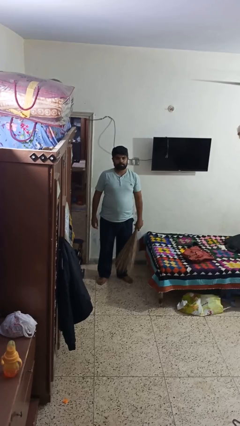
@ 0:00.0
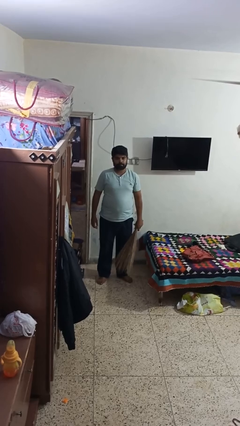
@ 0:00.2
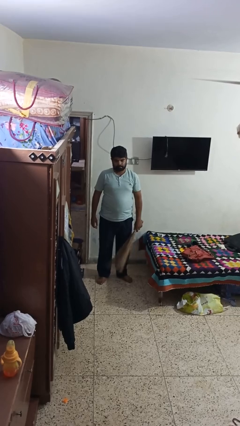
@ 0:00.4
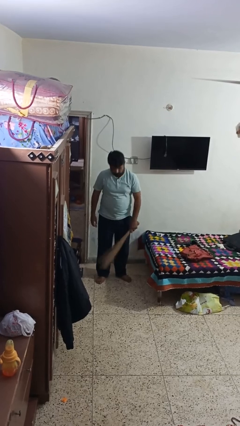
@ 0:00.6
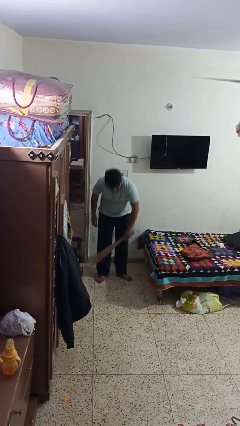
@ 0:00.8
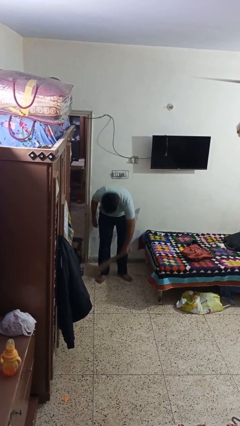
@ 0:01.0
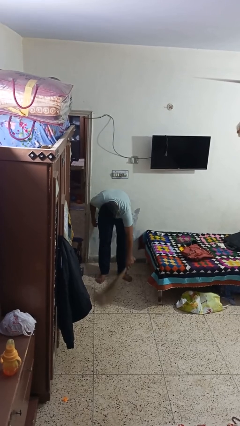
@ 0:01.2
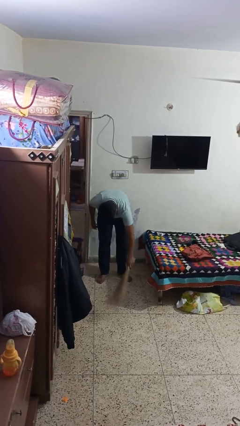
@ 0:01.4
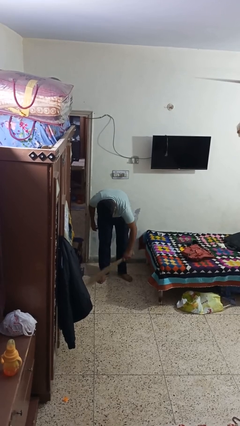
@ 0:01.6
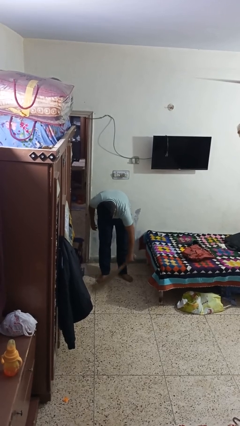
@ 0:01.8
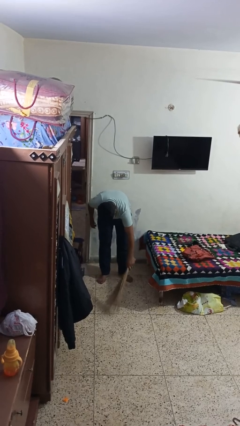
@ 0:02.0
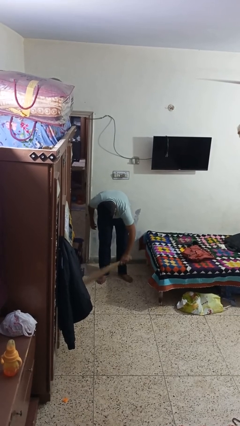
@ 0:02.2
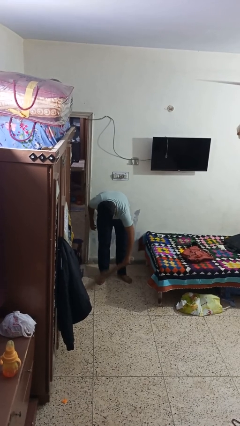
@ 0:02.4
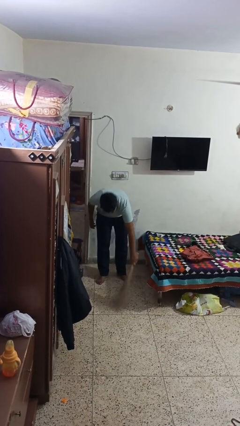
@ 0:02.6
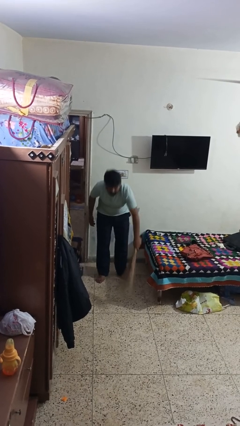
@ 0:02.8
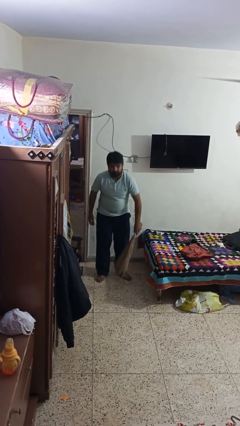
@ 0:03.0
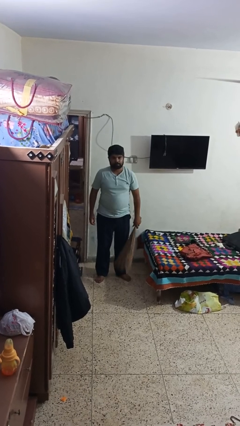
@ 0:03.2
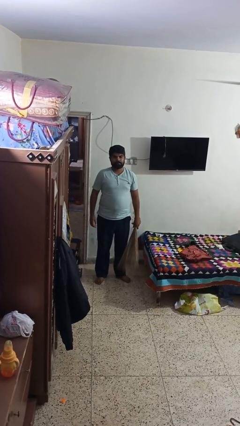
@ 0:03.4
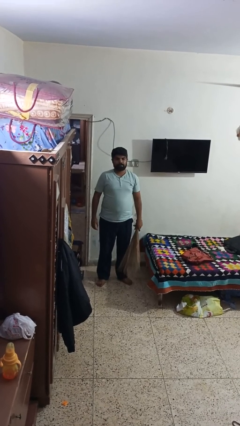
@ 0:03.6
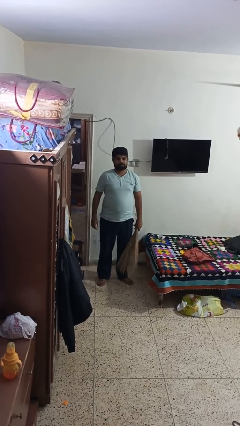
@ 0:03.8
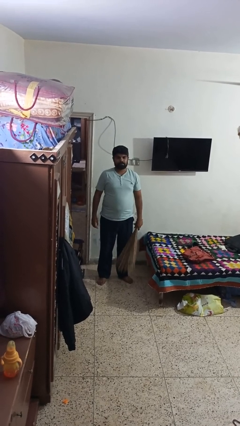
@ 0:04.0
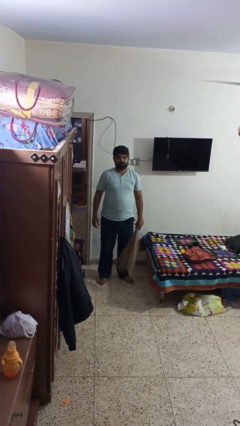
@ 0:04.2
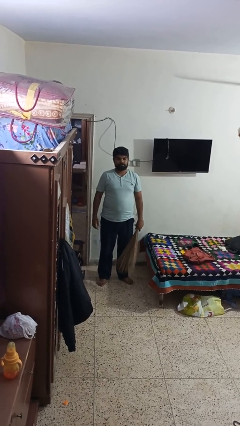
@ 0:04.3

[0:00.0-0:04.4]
person sweeps floor

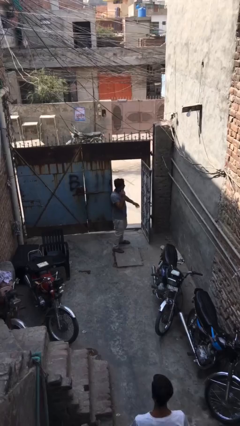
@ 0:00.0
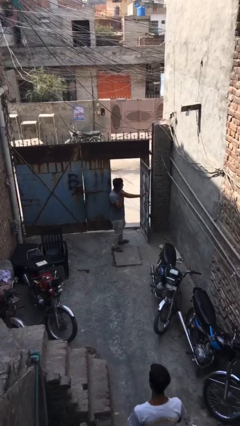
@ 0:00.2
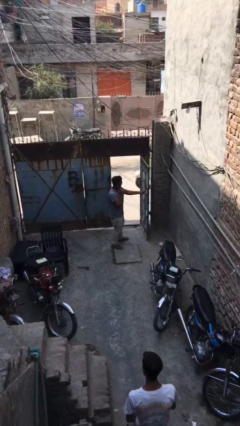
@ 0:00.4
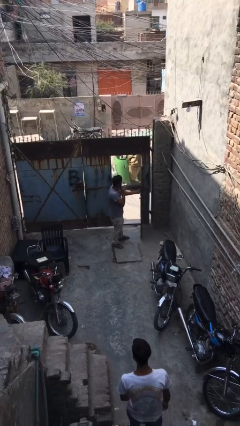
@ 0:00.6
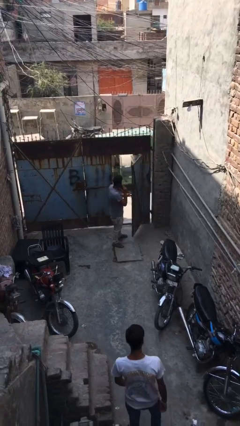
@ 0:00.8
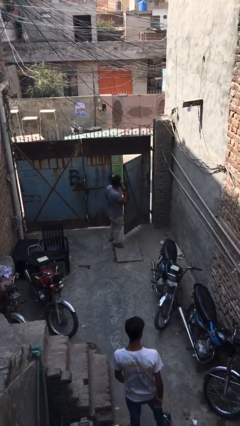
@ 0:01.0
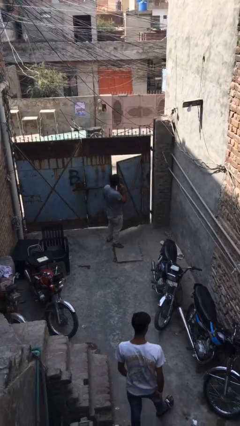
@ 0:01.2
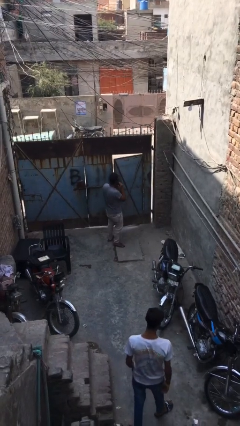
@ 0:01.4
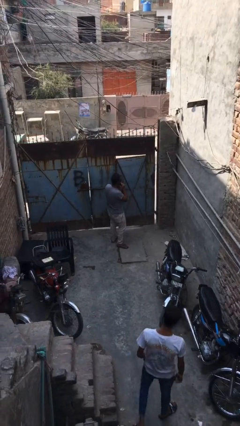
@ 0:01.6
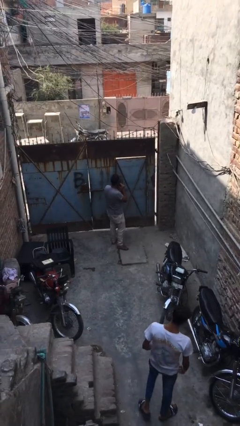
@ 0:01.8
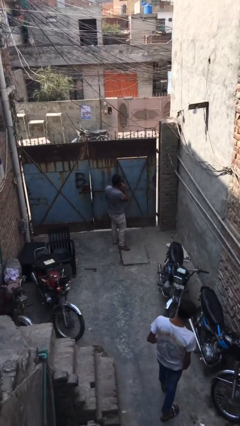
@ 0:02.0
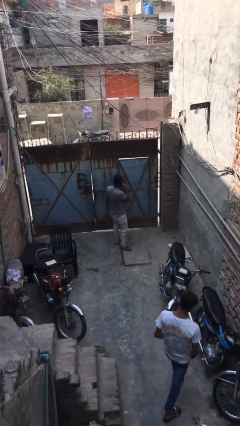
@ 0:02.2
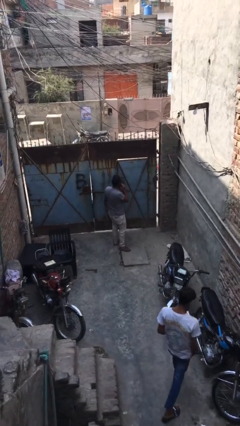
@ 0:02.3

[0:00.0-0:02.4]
person closes facility door

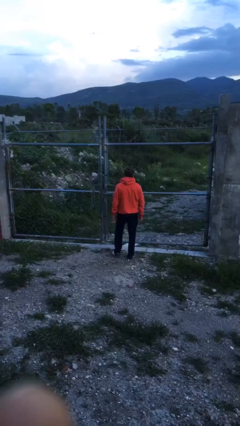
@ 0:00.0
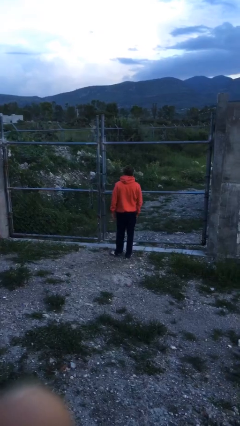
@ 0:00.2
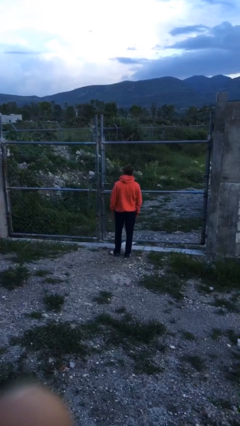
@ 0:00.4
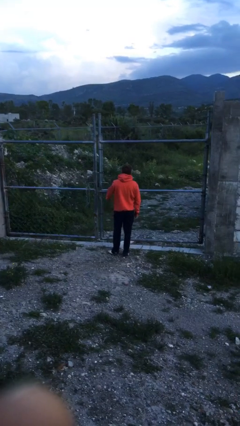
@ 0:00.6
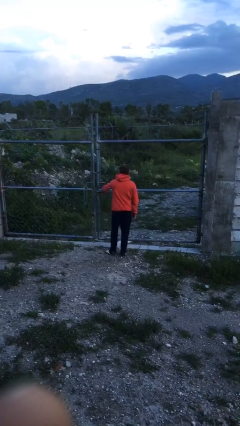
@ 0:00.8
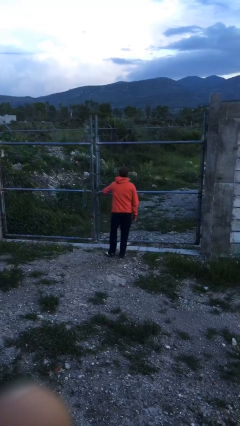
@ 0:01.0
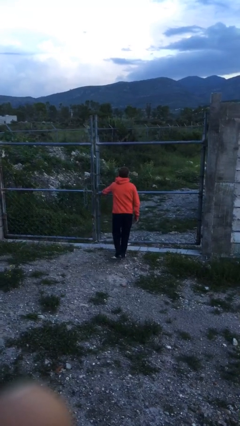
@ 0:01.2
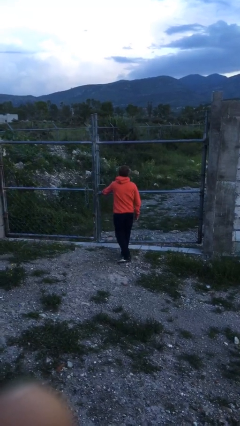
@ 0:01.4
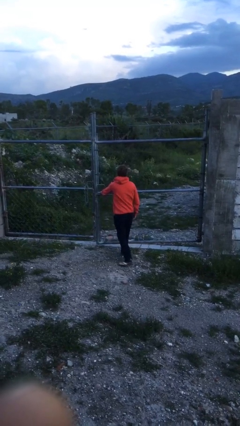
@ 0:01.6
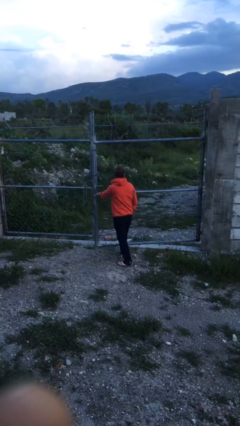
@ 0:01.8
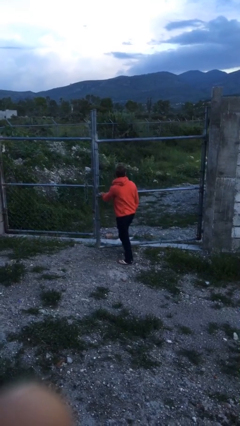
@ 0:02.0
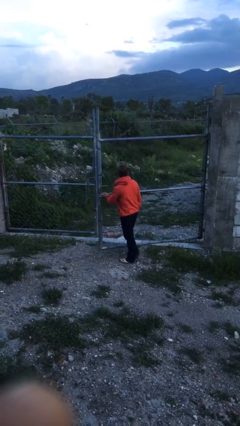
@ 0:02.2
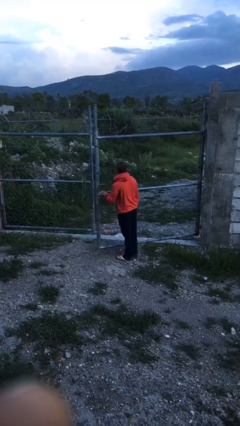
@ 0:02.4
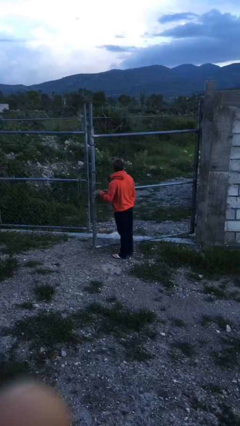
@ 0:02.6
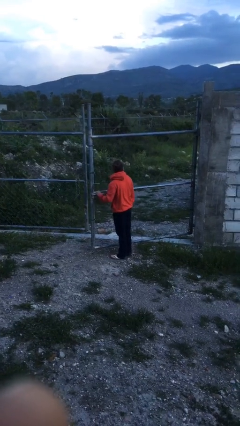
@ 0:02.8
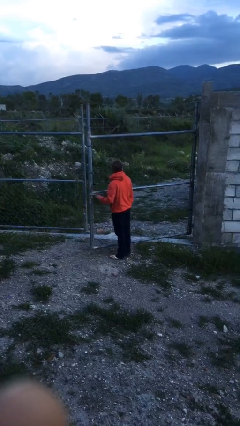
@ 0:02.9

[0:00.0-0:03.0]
person opens gate

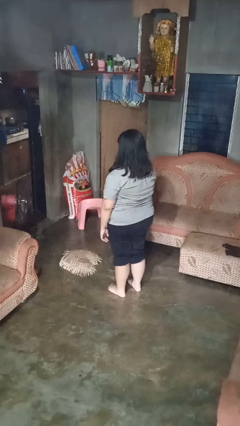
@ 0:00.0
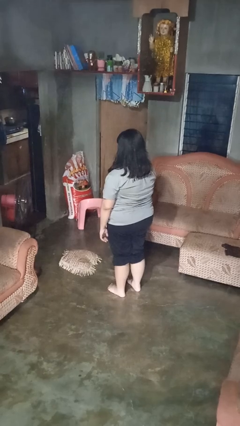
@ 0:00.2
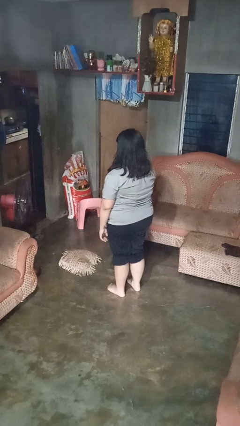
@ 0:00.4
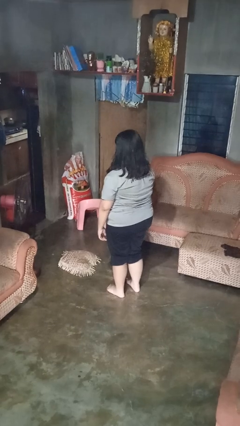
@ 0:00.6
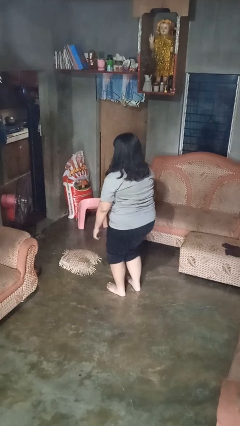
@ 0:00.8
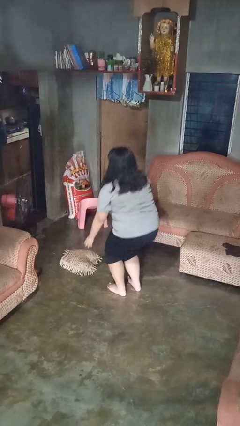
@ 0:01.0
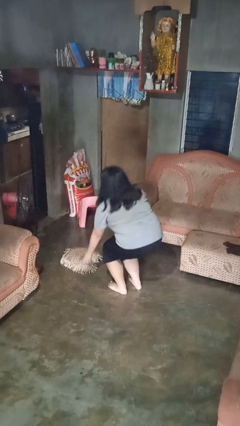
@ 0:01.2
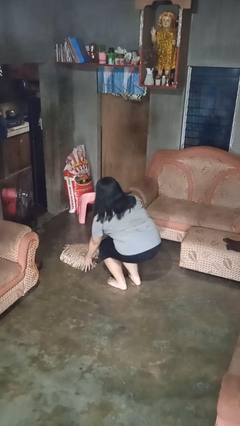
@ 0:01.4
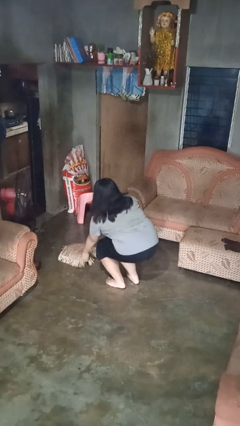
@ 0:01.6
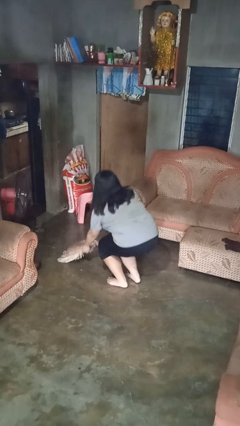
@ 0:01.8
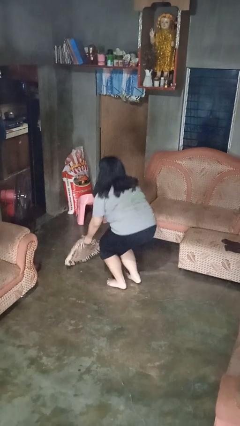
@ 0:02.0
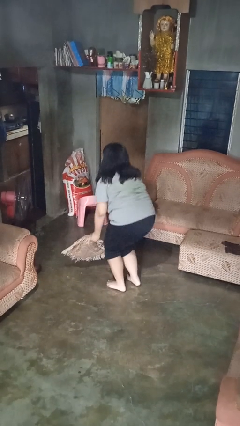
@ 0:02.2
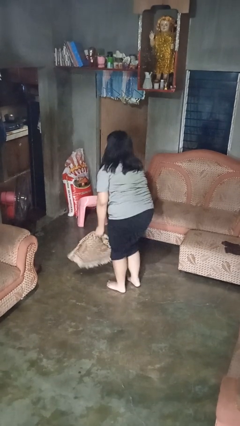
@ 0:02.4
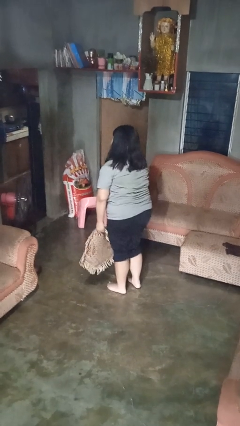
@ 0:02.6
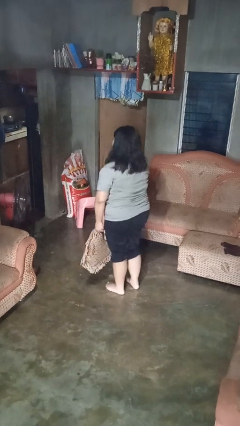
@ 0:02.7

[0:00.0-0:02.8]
person picks up object from floor

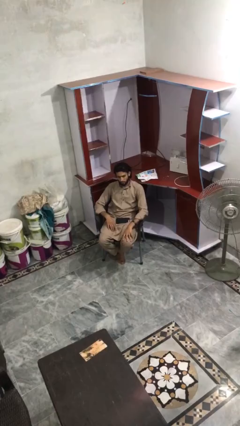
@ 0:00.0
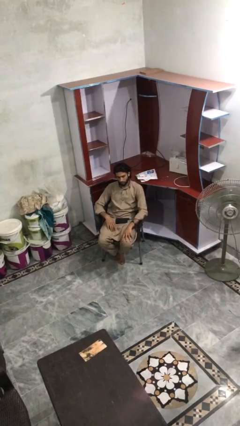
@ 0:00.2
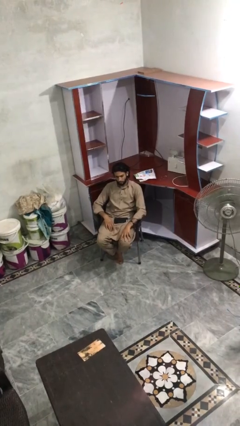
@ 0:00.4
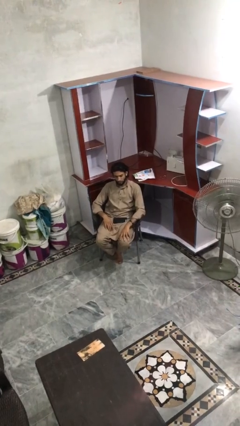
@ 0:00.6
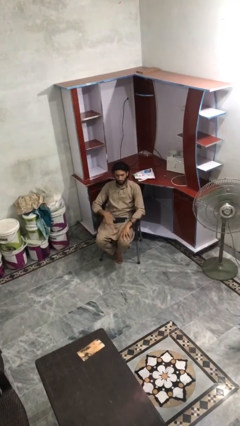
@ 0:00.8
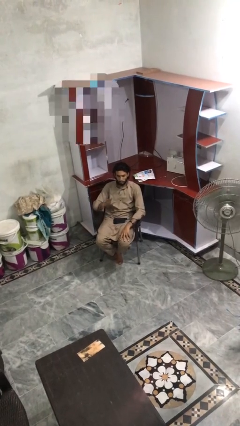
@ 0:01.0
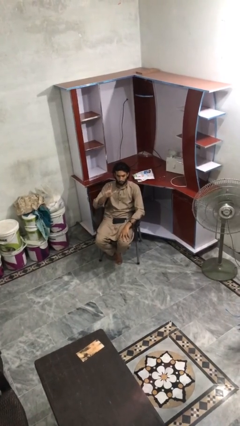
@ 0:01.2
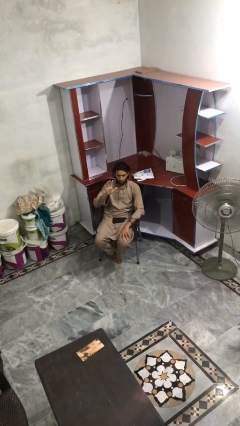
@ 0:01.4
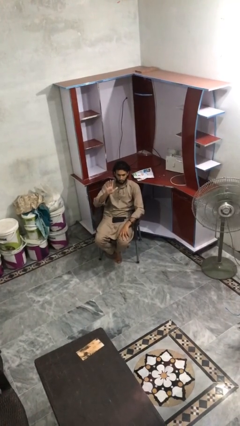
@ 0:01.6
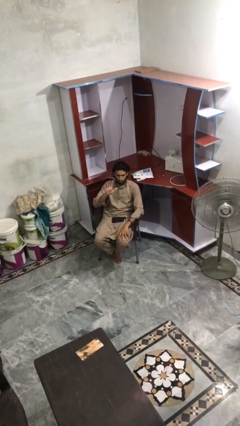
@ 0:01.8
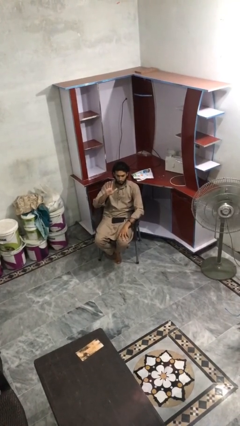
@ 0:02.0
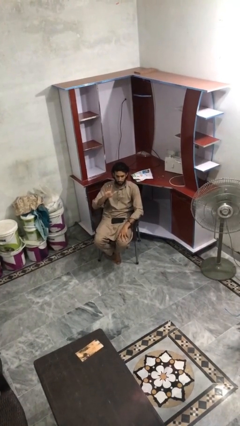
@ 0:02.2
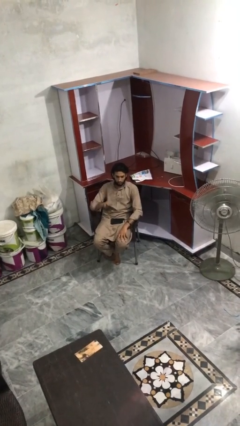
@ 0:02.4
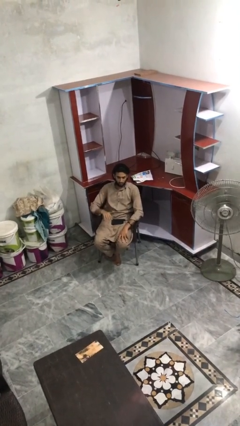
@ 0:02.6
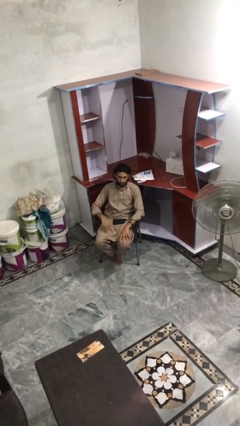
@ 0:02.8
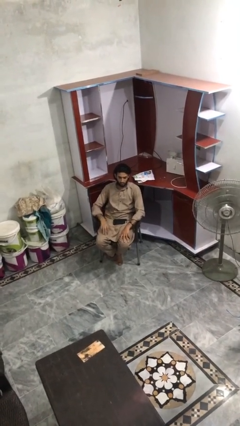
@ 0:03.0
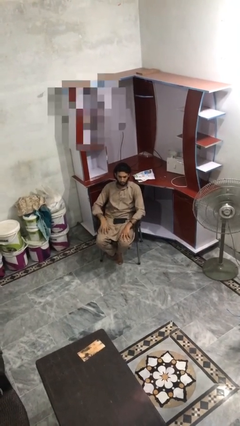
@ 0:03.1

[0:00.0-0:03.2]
person gestures number five

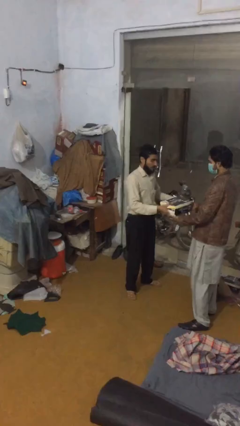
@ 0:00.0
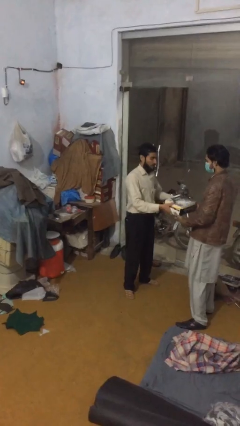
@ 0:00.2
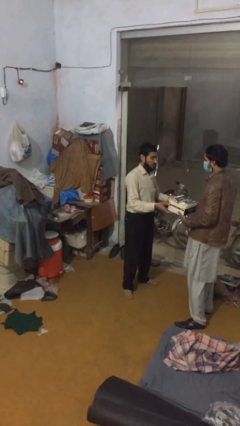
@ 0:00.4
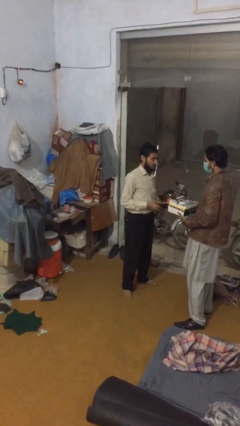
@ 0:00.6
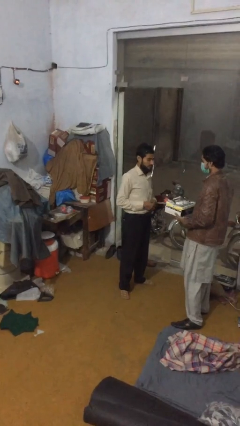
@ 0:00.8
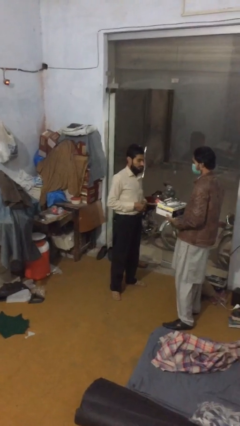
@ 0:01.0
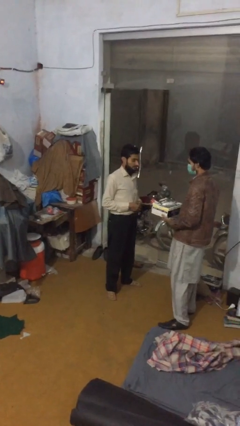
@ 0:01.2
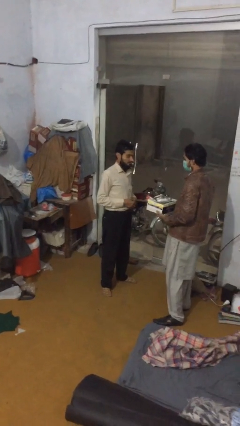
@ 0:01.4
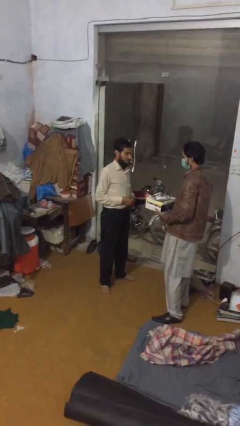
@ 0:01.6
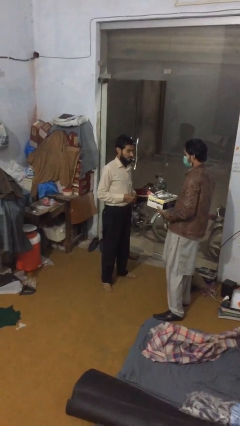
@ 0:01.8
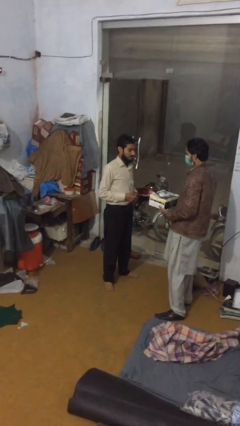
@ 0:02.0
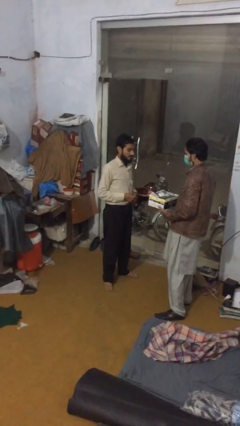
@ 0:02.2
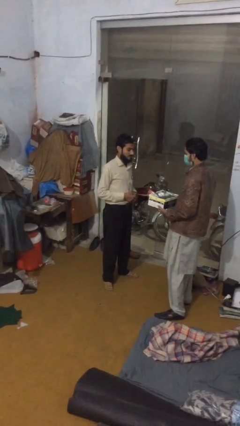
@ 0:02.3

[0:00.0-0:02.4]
person transfers object to person
